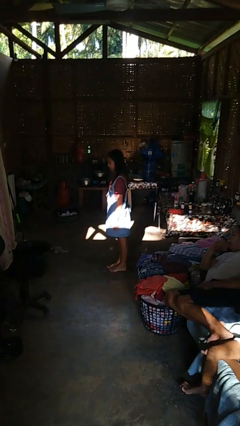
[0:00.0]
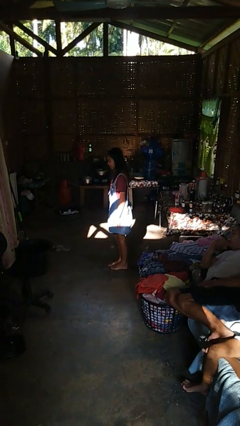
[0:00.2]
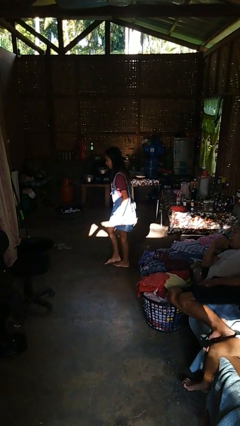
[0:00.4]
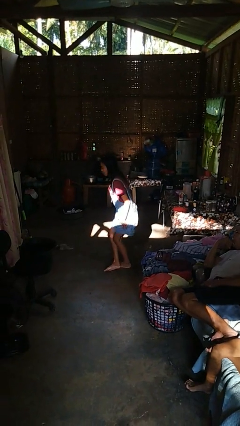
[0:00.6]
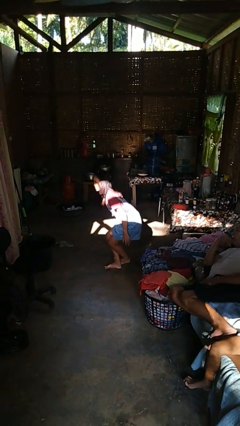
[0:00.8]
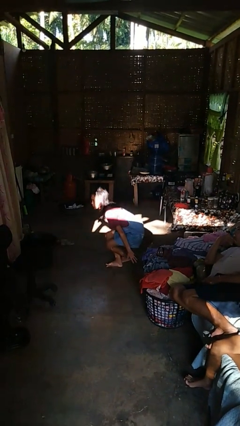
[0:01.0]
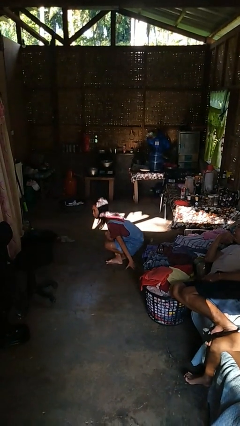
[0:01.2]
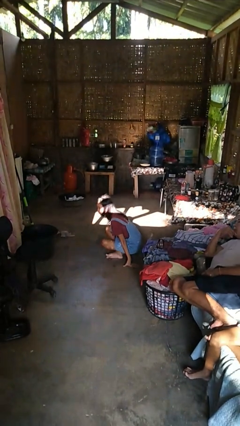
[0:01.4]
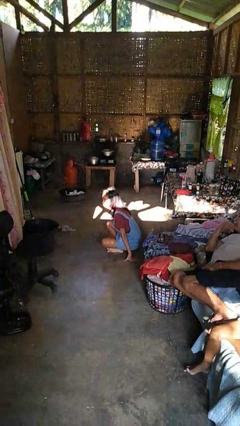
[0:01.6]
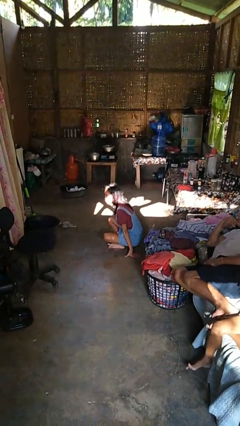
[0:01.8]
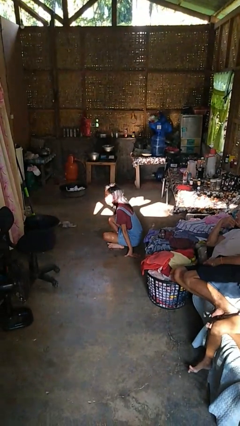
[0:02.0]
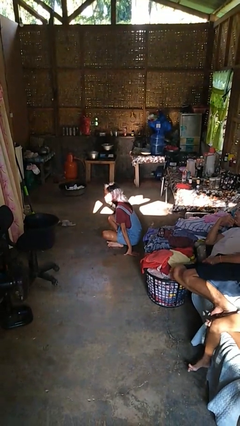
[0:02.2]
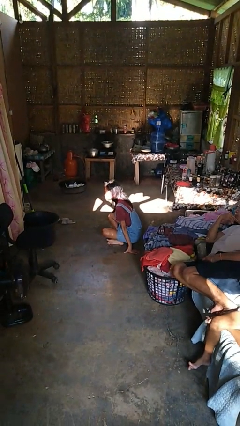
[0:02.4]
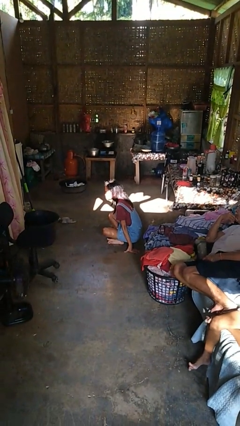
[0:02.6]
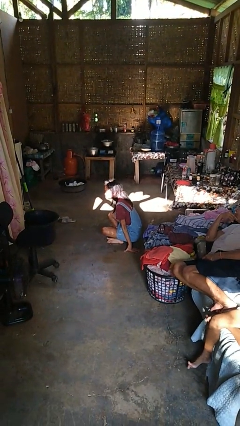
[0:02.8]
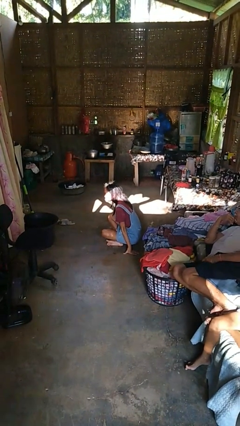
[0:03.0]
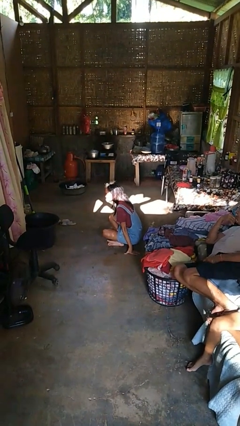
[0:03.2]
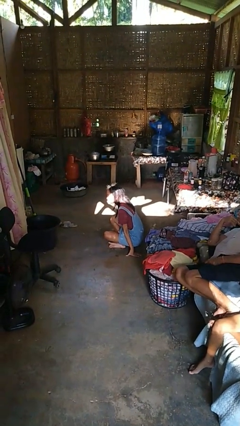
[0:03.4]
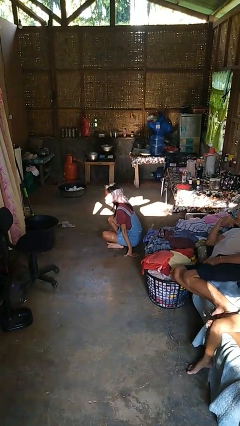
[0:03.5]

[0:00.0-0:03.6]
person sits crisscross

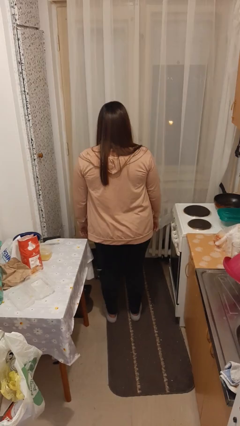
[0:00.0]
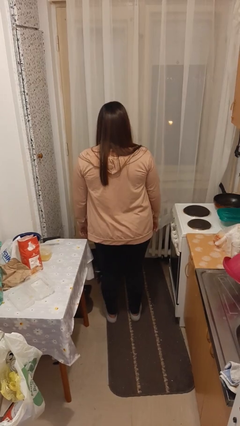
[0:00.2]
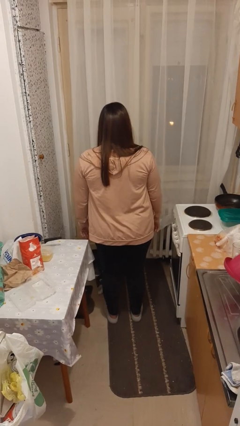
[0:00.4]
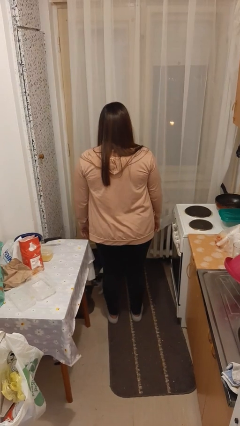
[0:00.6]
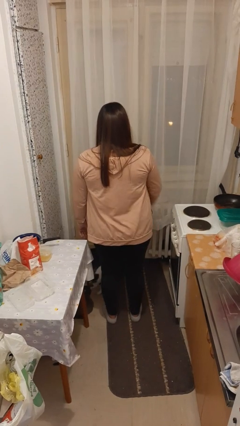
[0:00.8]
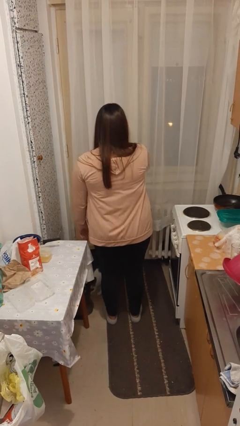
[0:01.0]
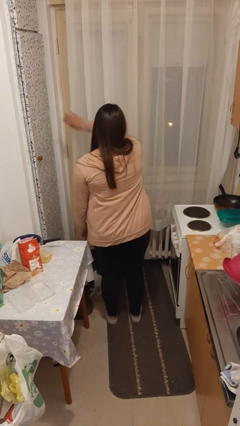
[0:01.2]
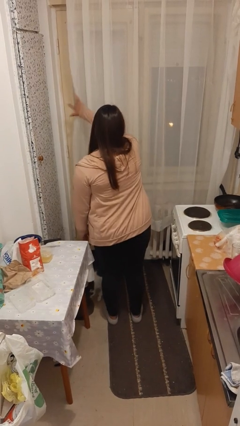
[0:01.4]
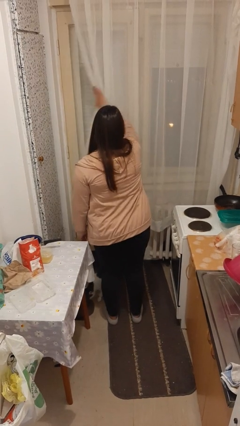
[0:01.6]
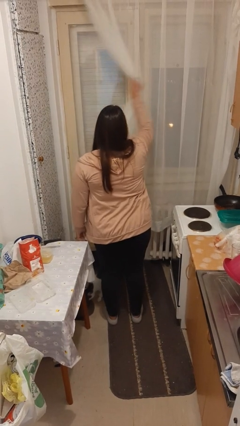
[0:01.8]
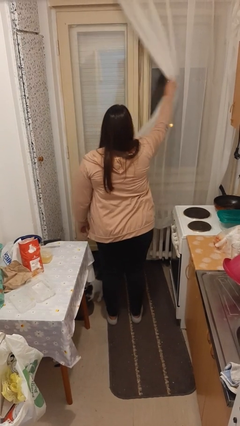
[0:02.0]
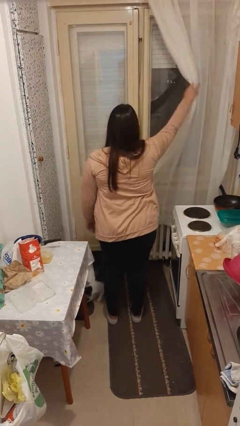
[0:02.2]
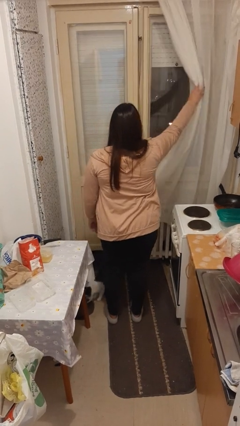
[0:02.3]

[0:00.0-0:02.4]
person opens curtains

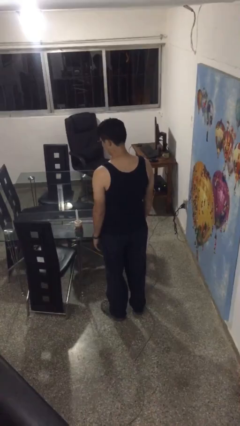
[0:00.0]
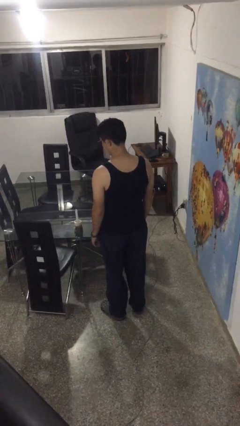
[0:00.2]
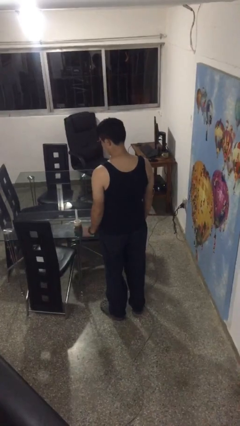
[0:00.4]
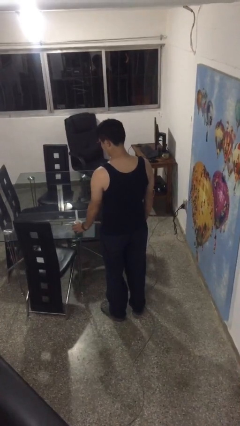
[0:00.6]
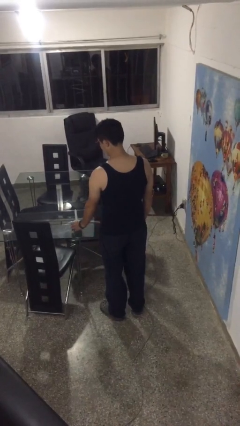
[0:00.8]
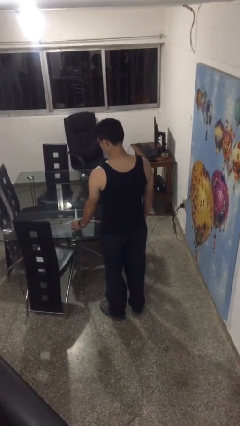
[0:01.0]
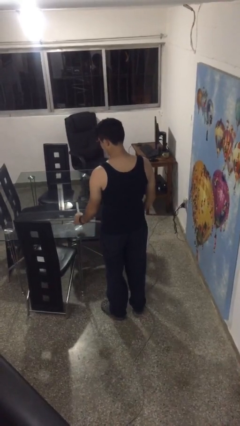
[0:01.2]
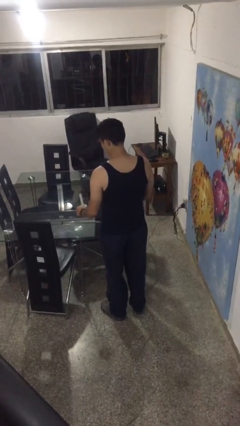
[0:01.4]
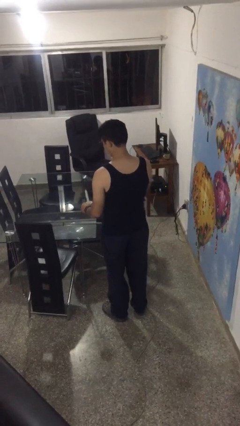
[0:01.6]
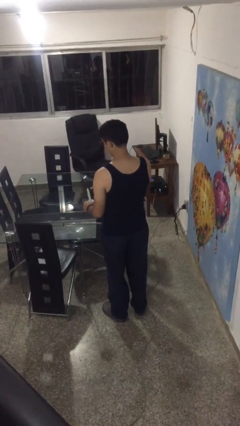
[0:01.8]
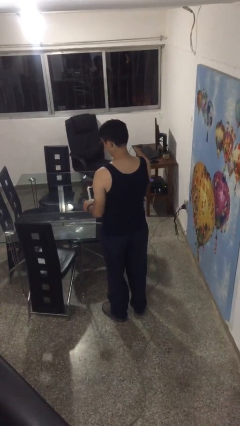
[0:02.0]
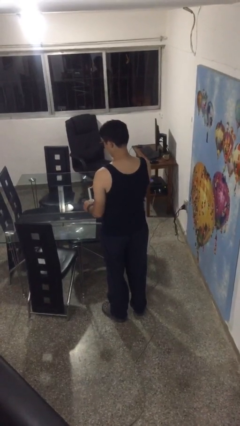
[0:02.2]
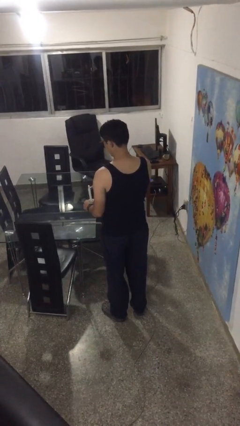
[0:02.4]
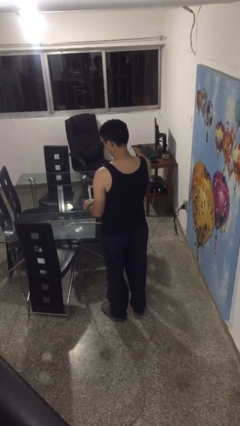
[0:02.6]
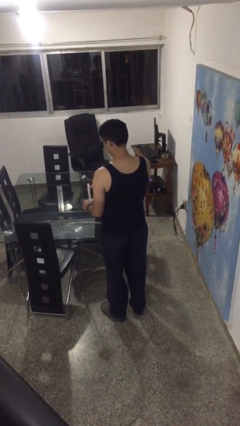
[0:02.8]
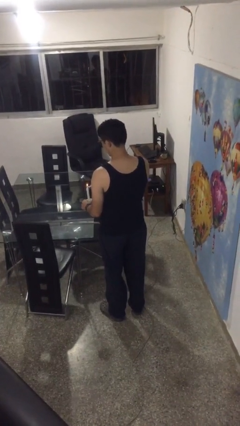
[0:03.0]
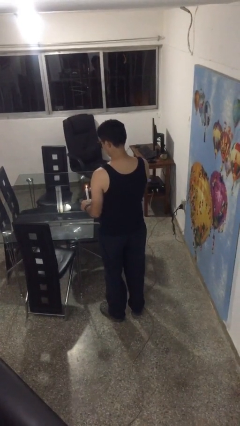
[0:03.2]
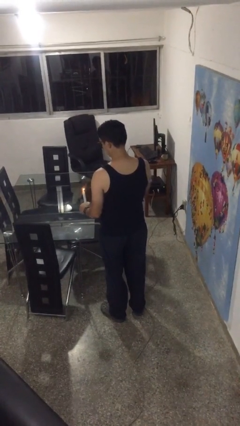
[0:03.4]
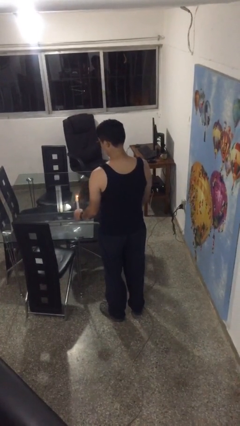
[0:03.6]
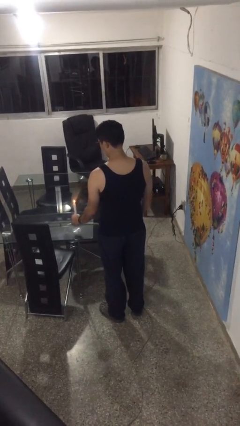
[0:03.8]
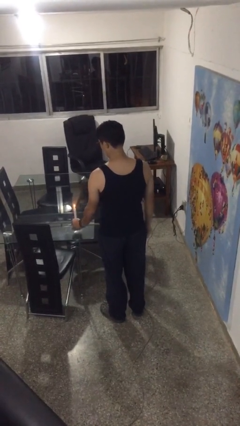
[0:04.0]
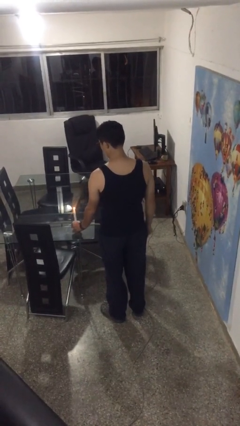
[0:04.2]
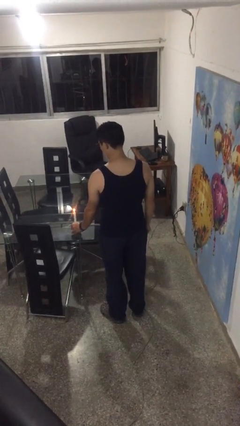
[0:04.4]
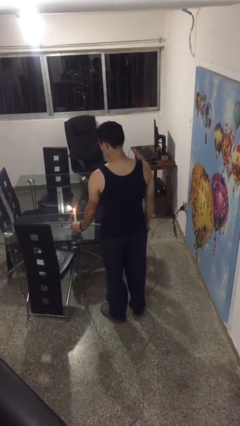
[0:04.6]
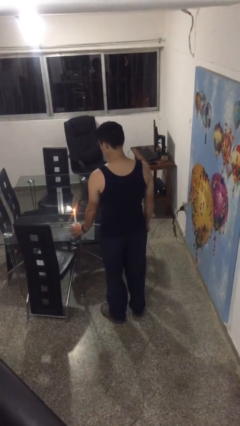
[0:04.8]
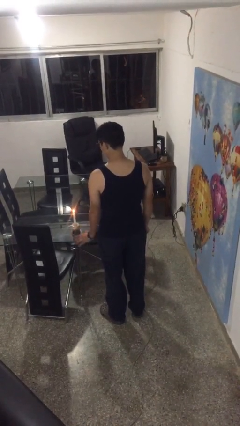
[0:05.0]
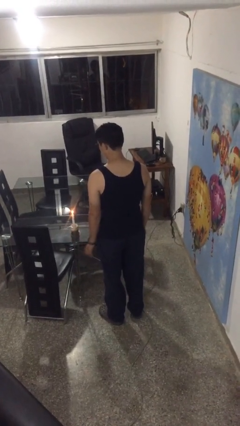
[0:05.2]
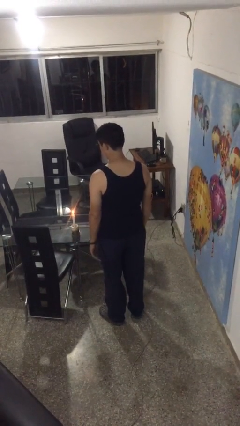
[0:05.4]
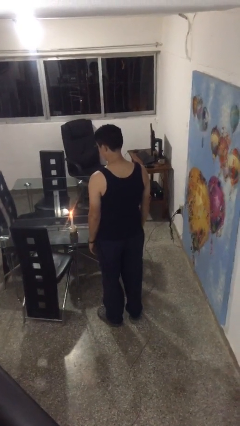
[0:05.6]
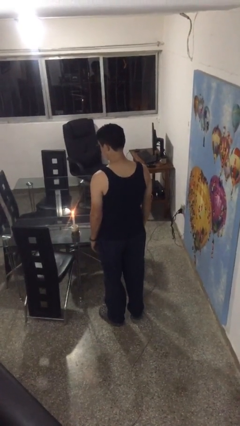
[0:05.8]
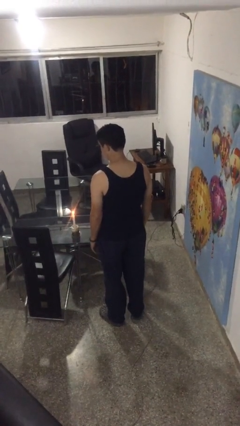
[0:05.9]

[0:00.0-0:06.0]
person lights candle

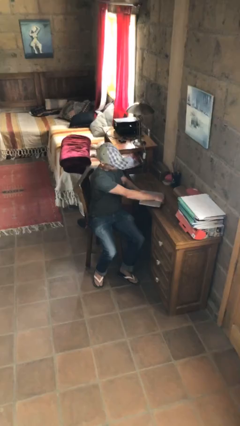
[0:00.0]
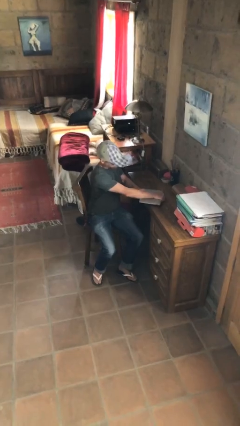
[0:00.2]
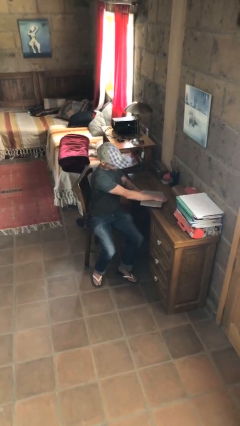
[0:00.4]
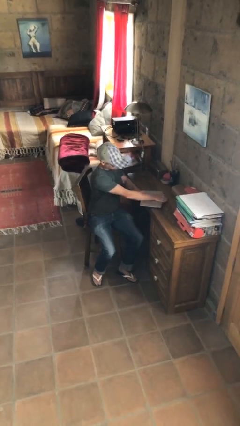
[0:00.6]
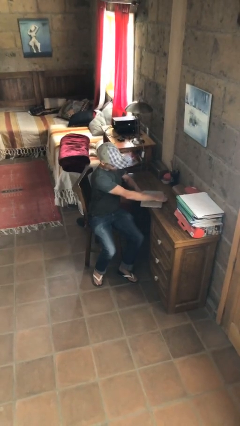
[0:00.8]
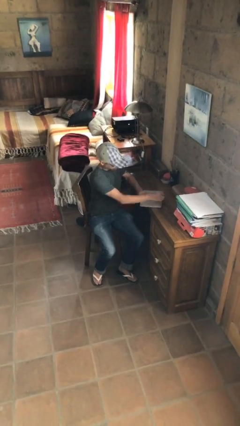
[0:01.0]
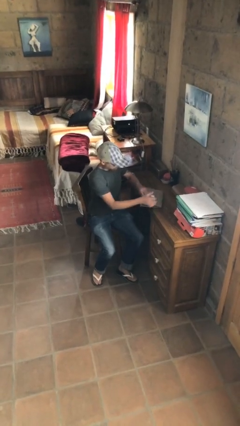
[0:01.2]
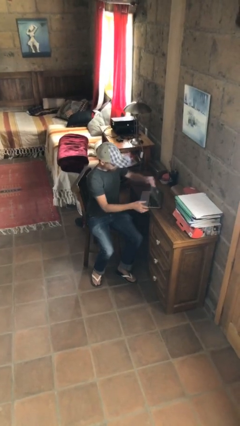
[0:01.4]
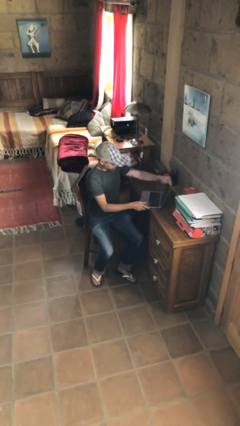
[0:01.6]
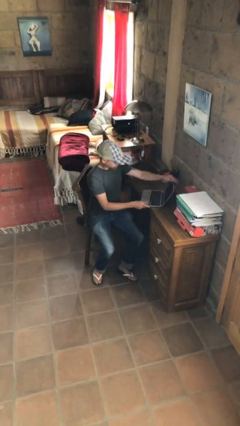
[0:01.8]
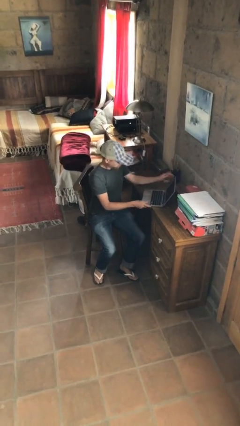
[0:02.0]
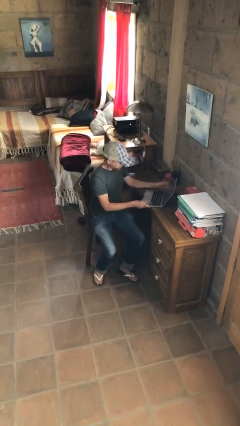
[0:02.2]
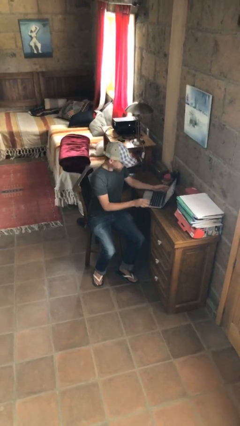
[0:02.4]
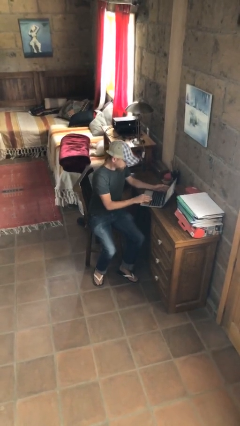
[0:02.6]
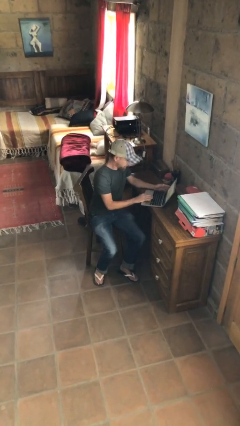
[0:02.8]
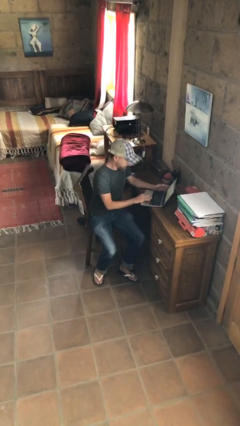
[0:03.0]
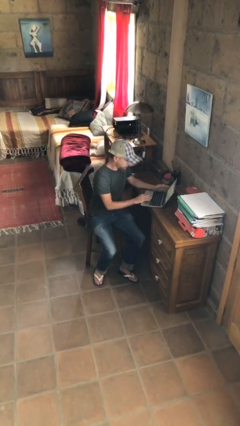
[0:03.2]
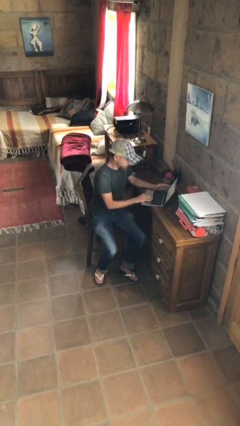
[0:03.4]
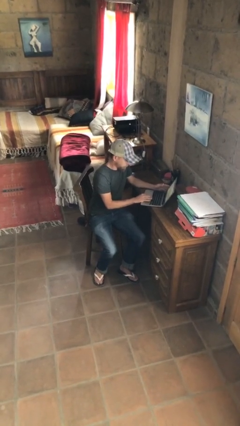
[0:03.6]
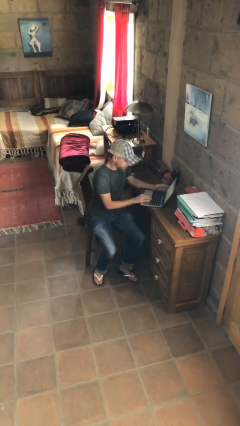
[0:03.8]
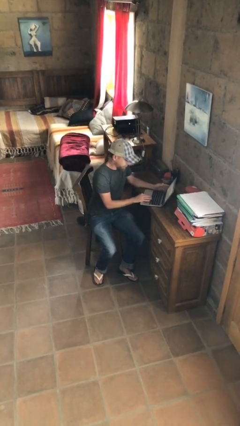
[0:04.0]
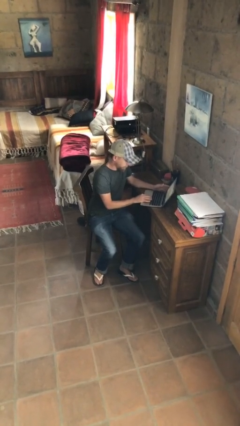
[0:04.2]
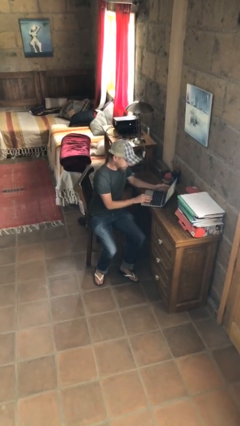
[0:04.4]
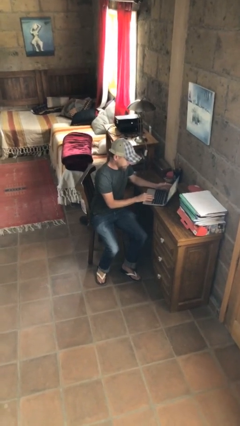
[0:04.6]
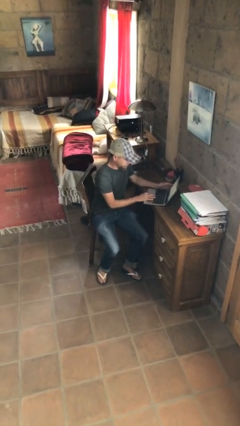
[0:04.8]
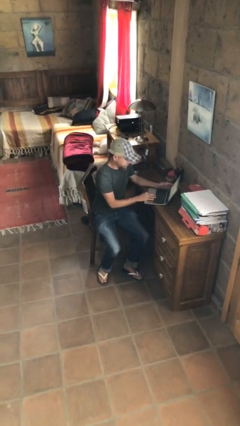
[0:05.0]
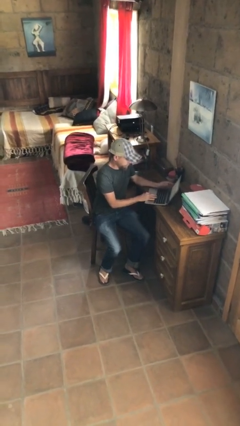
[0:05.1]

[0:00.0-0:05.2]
person interacts with laptop

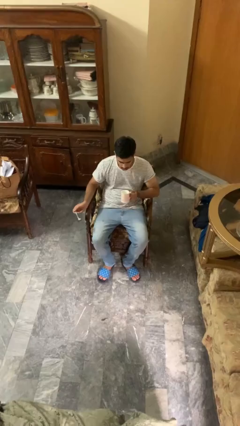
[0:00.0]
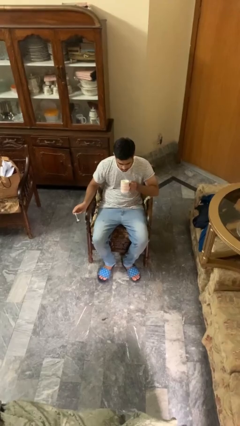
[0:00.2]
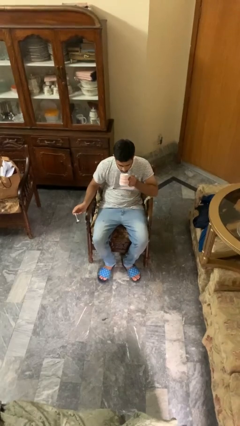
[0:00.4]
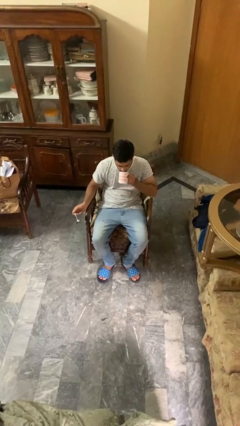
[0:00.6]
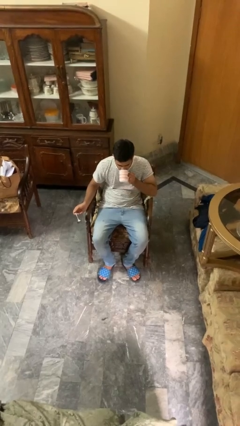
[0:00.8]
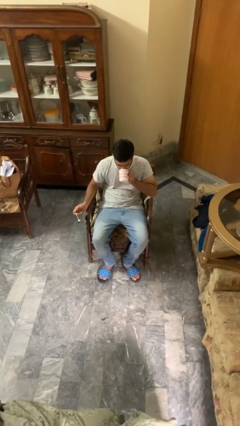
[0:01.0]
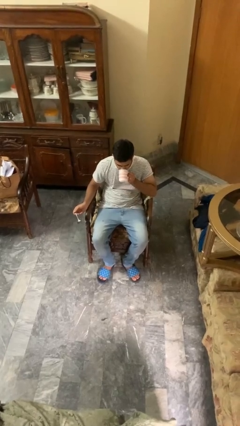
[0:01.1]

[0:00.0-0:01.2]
person drinks from mug
